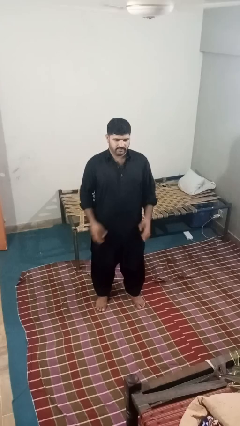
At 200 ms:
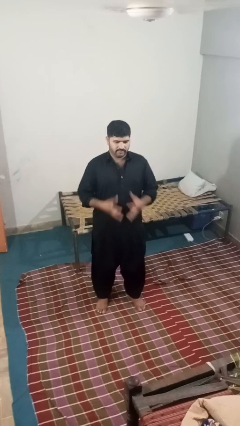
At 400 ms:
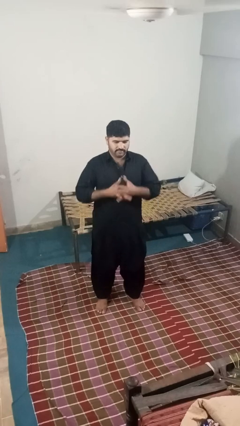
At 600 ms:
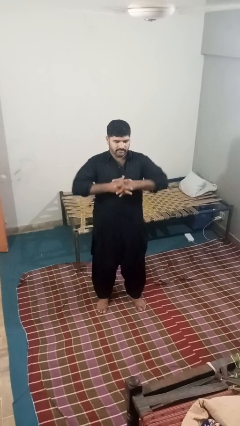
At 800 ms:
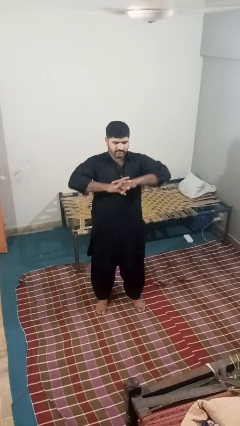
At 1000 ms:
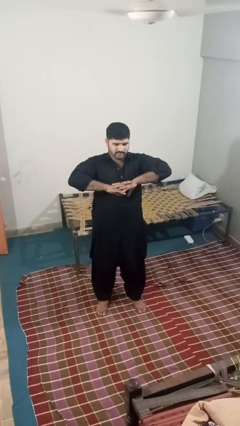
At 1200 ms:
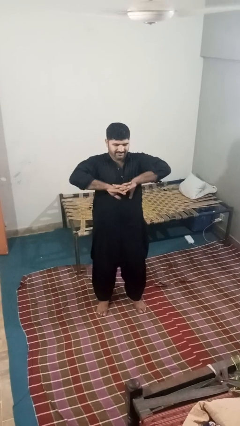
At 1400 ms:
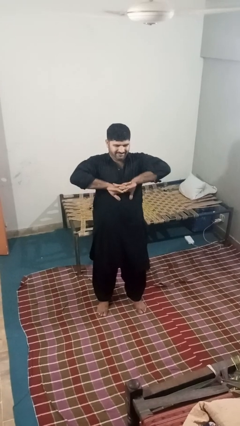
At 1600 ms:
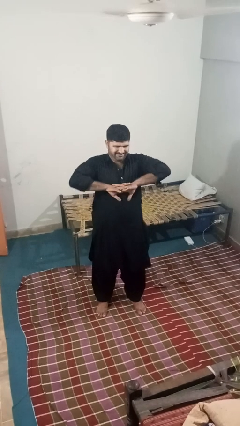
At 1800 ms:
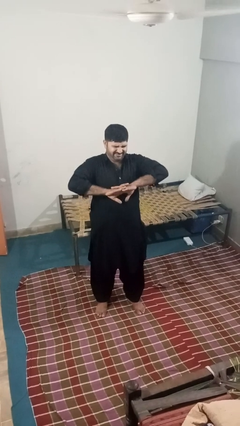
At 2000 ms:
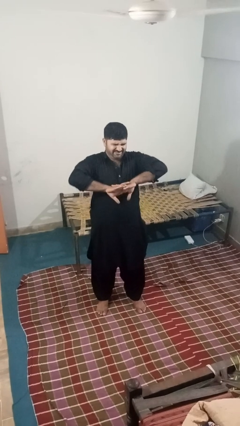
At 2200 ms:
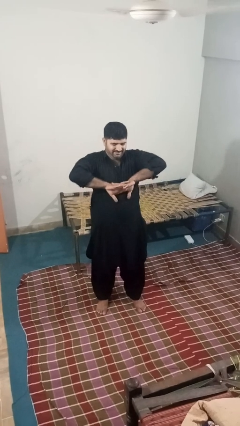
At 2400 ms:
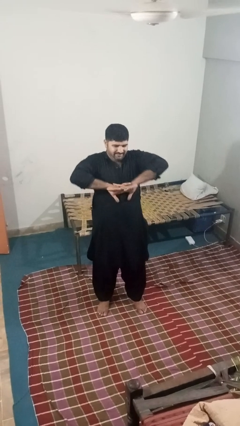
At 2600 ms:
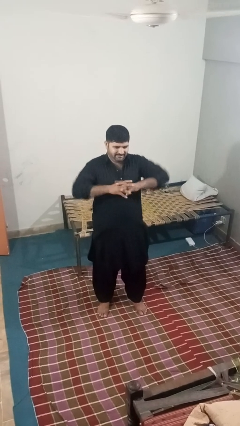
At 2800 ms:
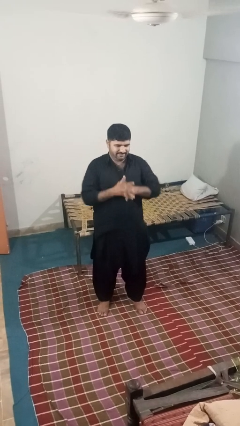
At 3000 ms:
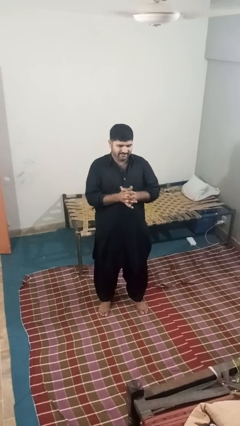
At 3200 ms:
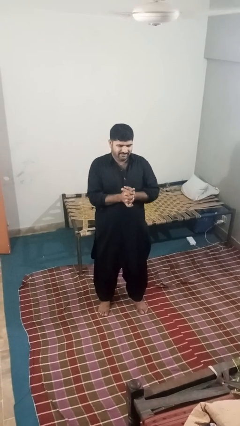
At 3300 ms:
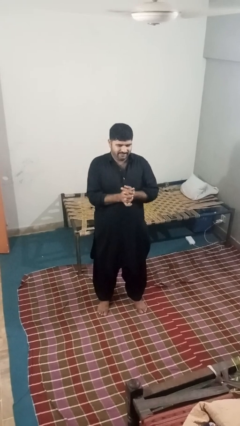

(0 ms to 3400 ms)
person cracks knuckles

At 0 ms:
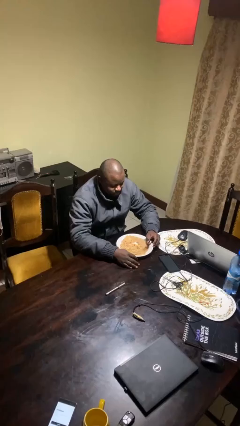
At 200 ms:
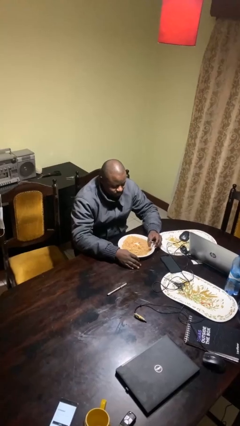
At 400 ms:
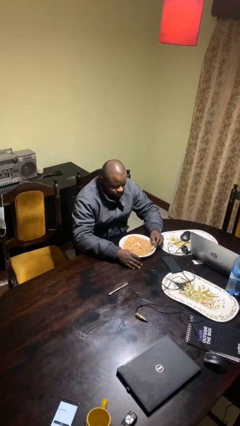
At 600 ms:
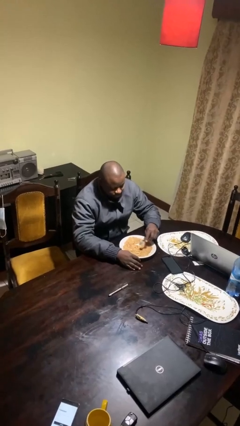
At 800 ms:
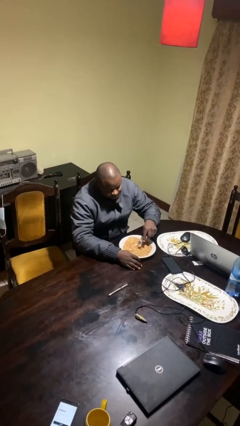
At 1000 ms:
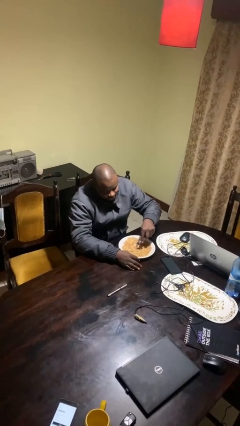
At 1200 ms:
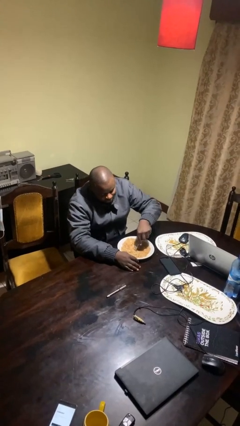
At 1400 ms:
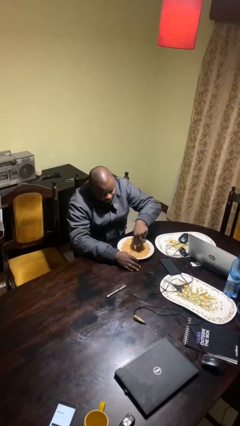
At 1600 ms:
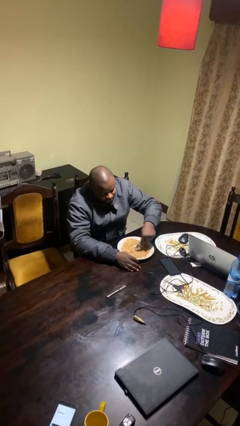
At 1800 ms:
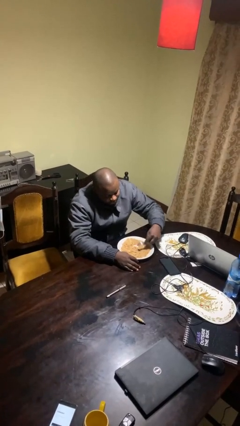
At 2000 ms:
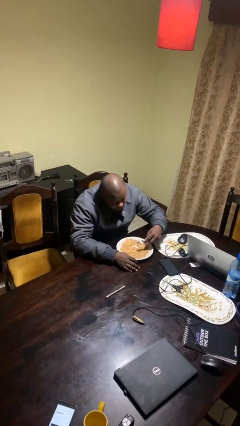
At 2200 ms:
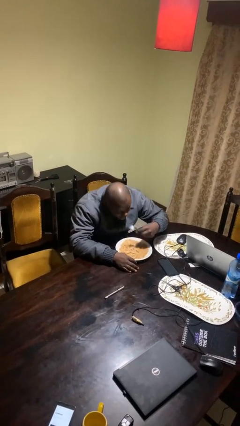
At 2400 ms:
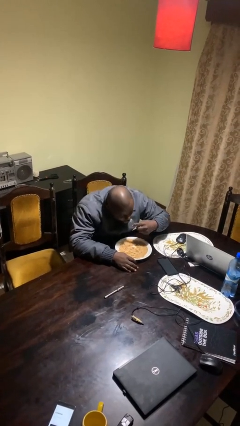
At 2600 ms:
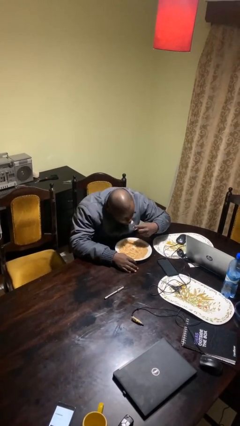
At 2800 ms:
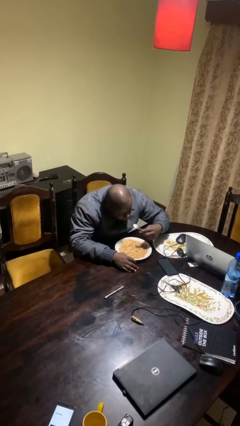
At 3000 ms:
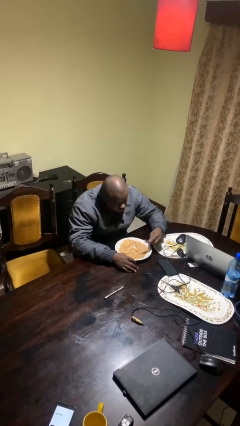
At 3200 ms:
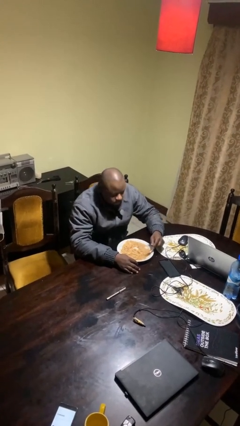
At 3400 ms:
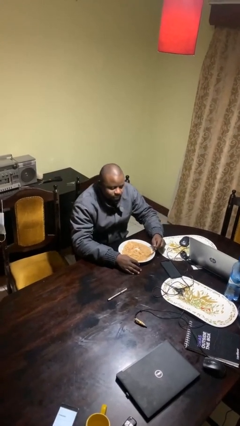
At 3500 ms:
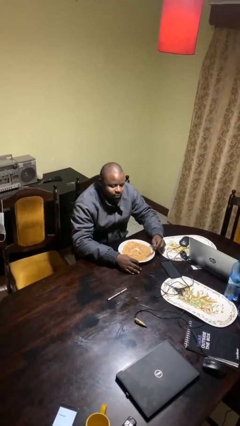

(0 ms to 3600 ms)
person eats with utensil

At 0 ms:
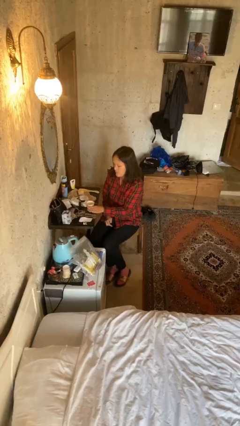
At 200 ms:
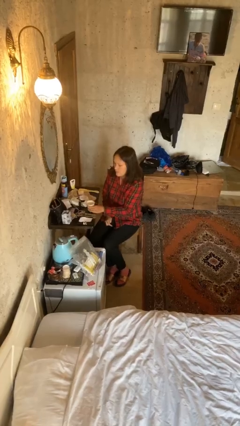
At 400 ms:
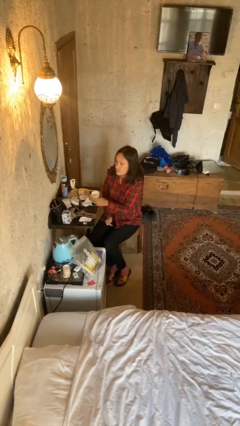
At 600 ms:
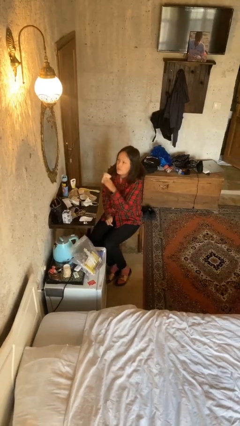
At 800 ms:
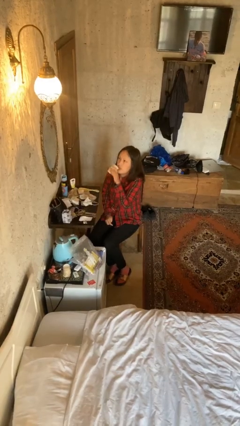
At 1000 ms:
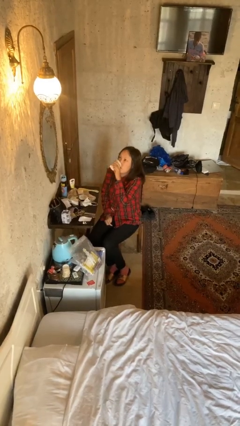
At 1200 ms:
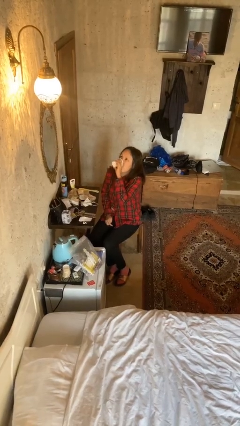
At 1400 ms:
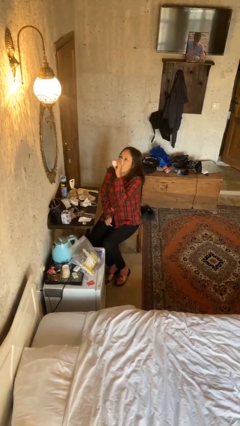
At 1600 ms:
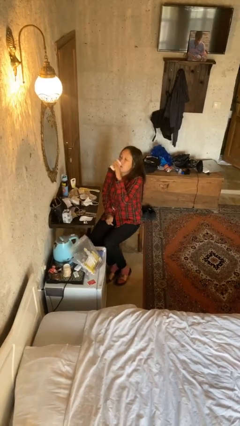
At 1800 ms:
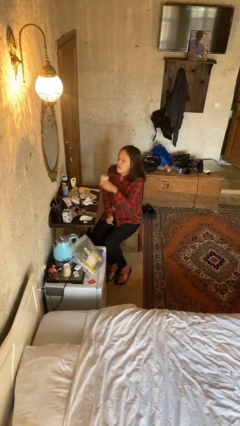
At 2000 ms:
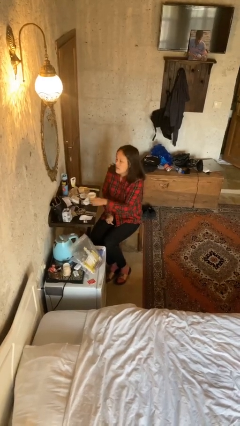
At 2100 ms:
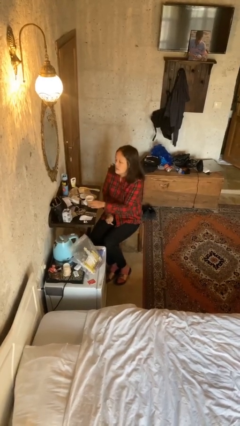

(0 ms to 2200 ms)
person drinks from cup

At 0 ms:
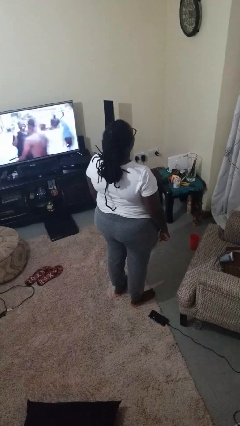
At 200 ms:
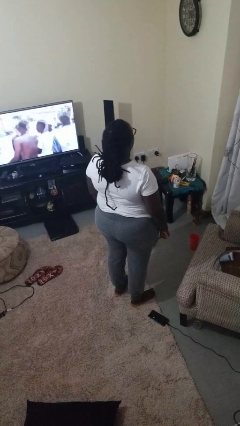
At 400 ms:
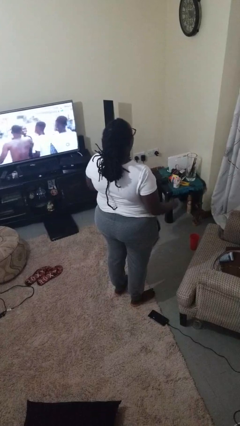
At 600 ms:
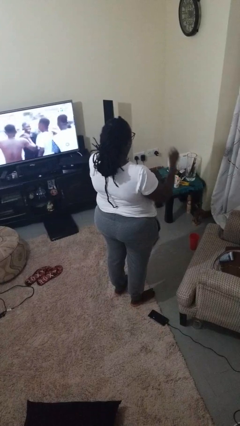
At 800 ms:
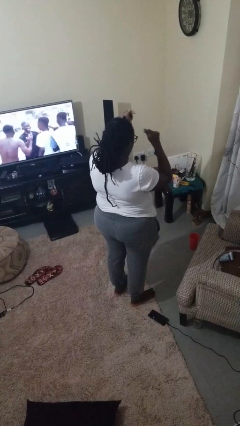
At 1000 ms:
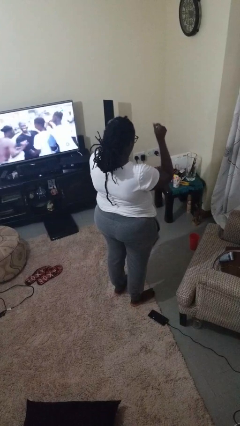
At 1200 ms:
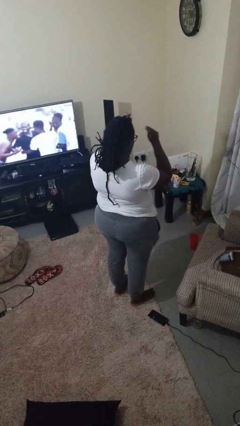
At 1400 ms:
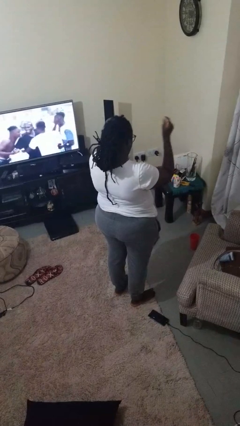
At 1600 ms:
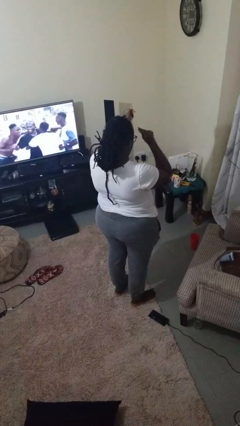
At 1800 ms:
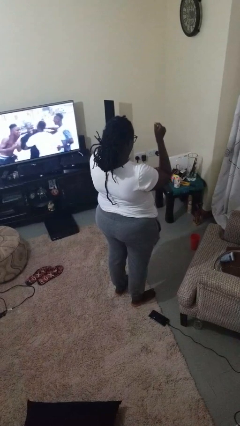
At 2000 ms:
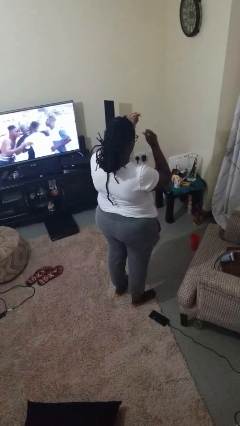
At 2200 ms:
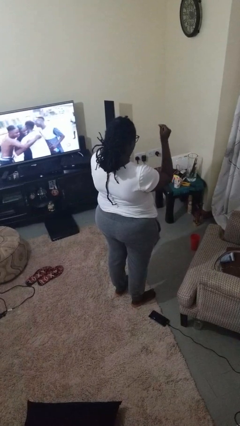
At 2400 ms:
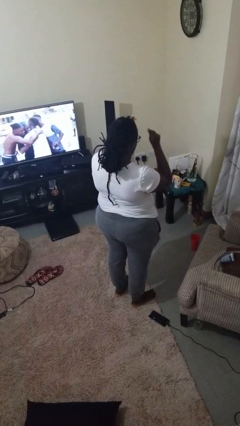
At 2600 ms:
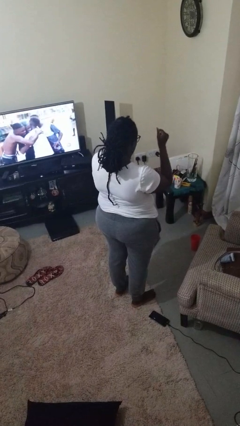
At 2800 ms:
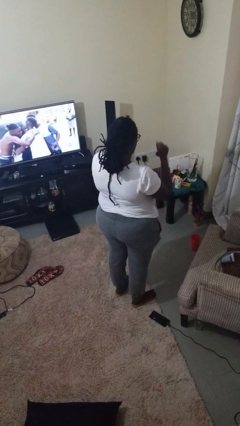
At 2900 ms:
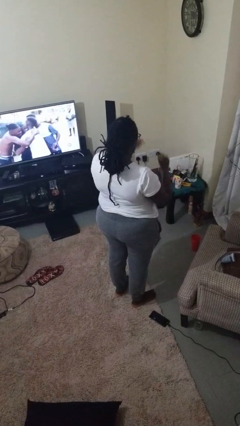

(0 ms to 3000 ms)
person snaps fingers

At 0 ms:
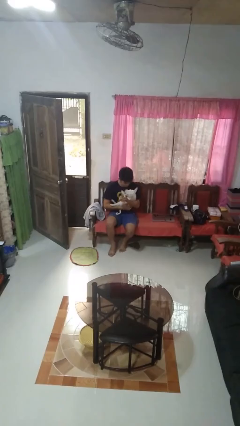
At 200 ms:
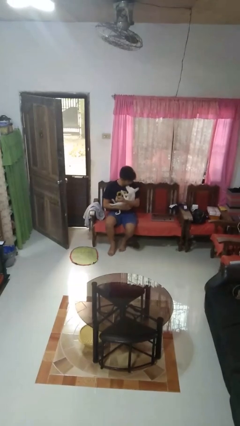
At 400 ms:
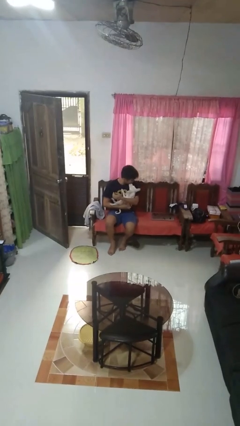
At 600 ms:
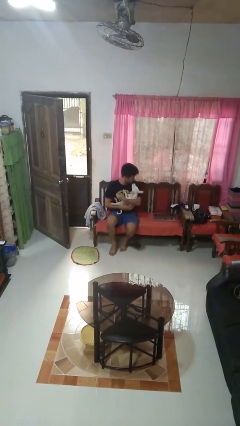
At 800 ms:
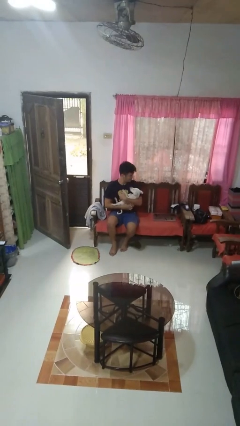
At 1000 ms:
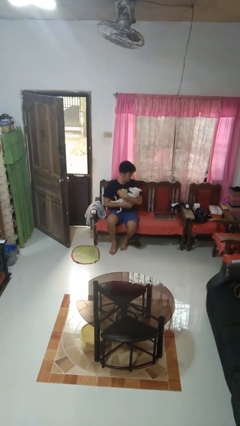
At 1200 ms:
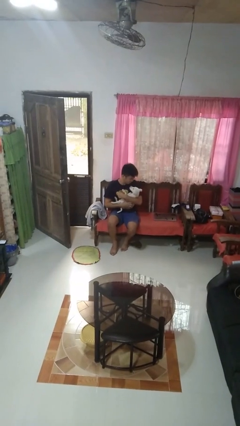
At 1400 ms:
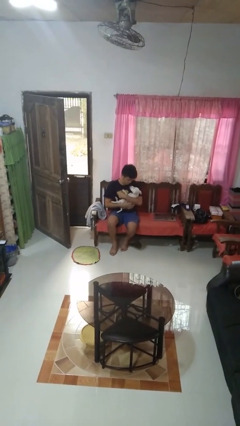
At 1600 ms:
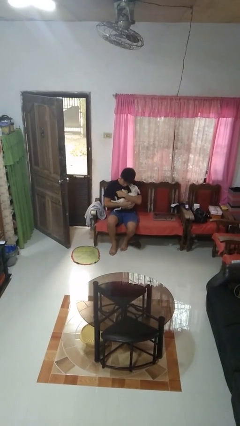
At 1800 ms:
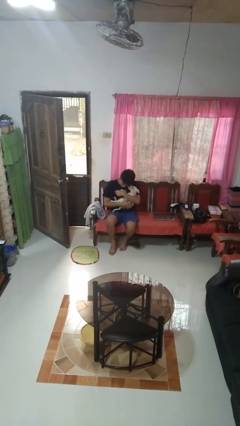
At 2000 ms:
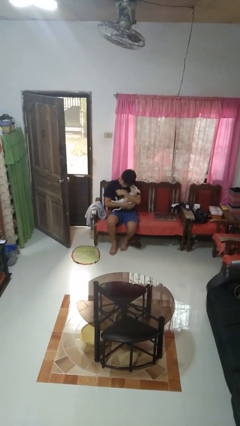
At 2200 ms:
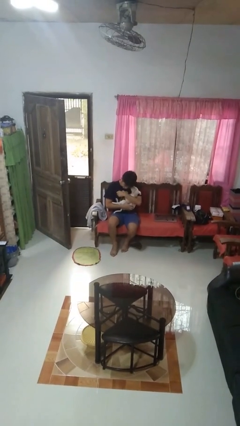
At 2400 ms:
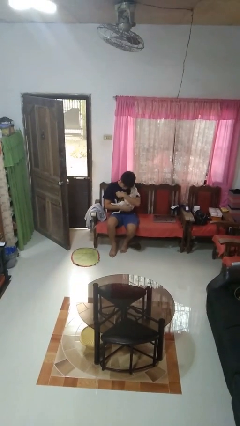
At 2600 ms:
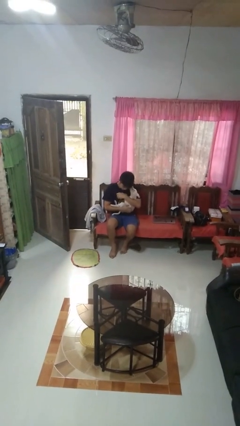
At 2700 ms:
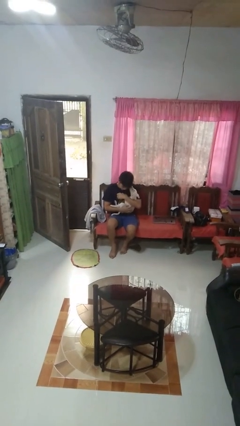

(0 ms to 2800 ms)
person hugs dog

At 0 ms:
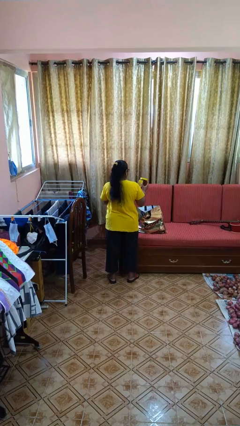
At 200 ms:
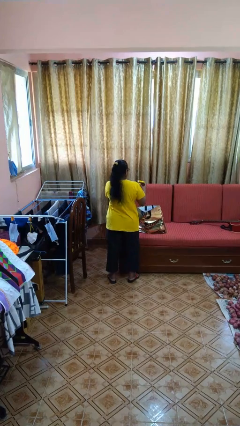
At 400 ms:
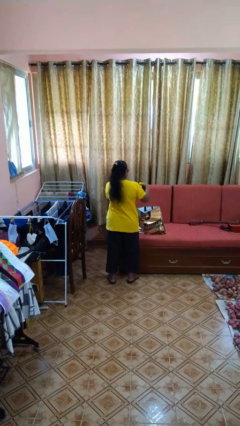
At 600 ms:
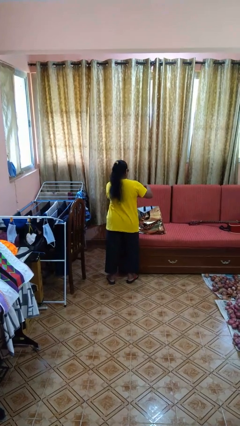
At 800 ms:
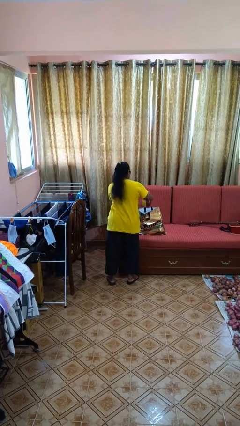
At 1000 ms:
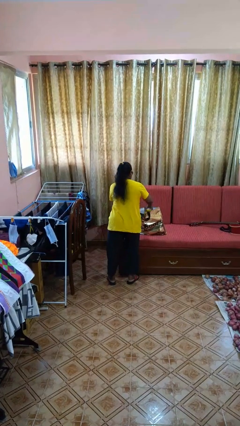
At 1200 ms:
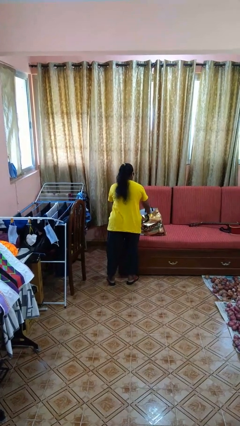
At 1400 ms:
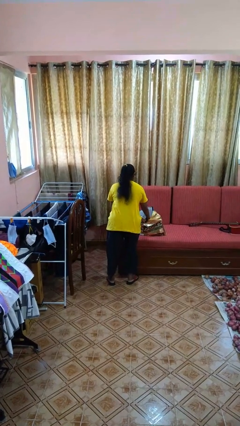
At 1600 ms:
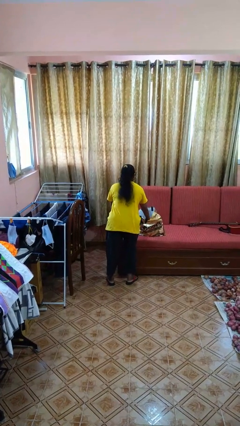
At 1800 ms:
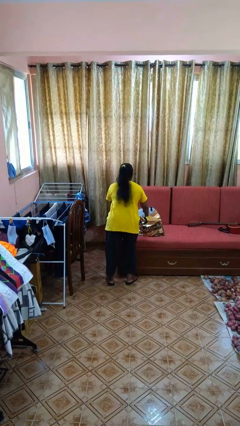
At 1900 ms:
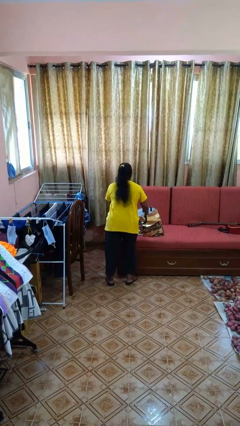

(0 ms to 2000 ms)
person puts object into bag

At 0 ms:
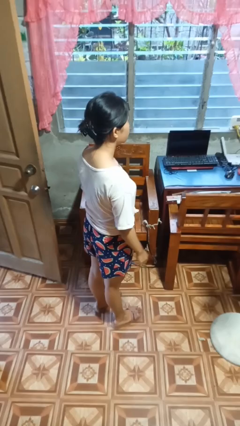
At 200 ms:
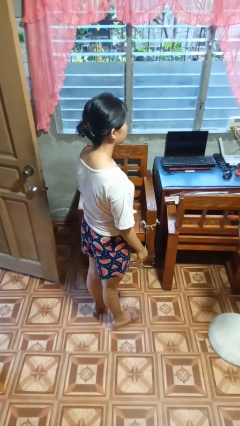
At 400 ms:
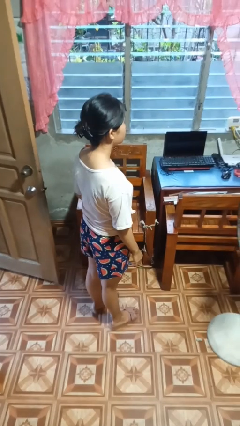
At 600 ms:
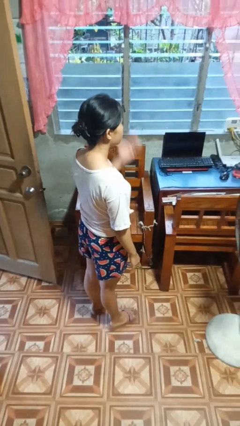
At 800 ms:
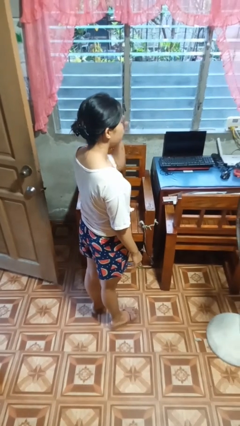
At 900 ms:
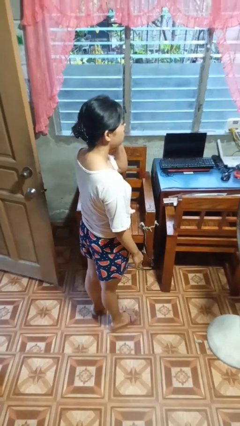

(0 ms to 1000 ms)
person rubs eyes
